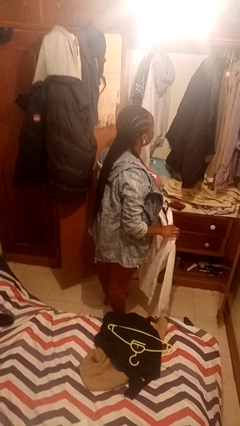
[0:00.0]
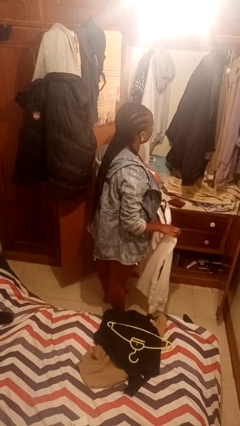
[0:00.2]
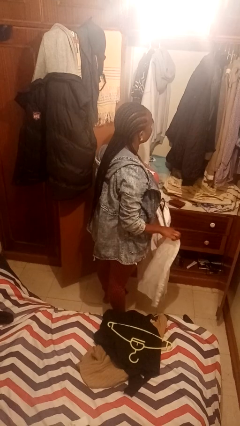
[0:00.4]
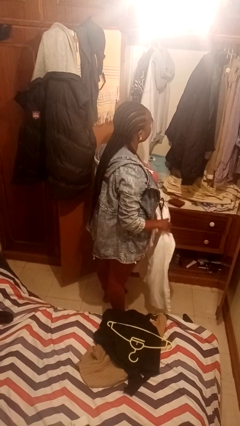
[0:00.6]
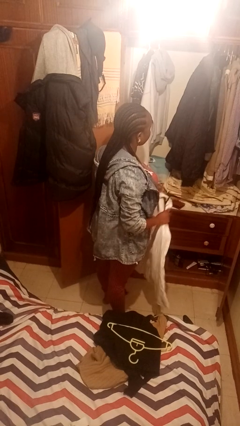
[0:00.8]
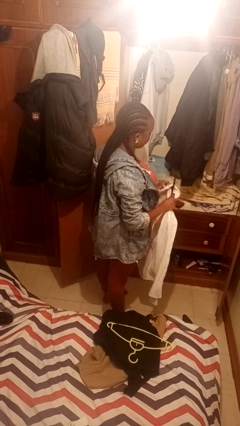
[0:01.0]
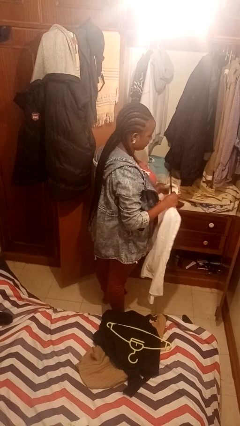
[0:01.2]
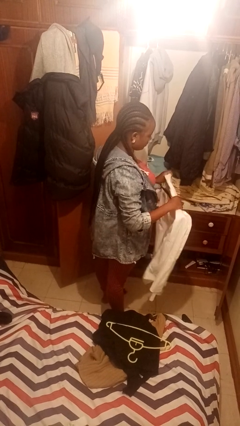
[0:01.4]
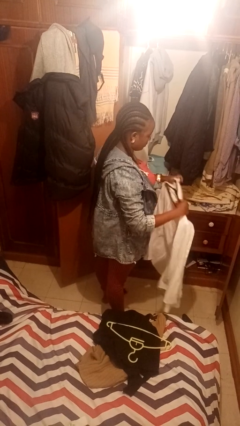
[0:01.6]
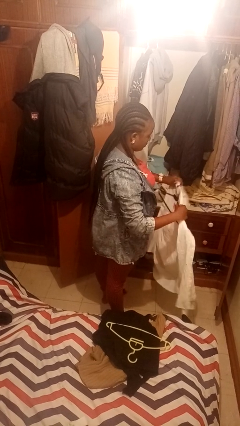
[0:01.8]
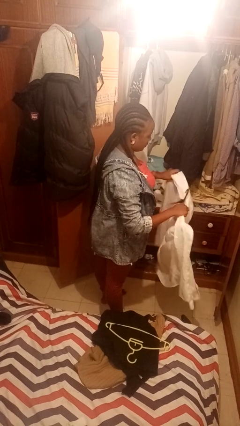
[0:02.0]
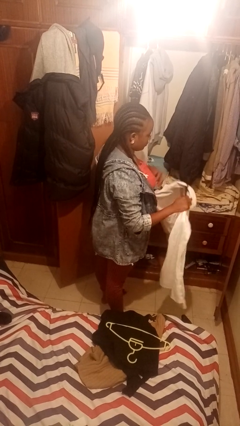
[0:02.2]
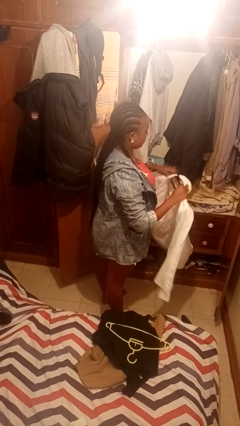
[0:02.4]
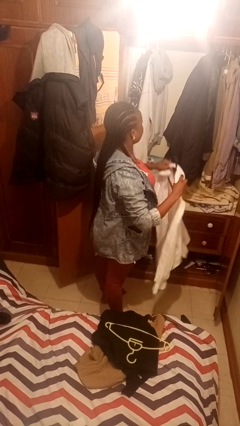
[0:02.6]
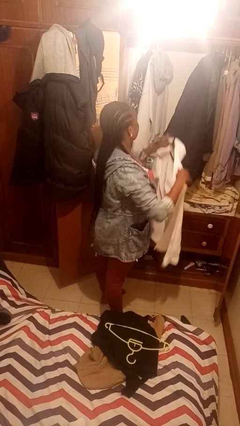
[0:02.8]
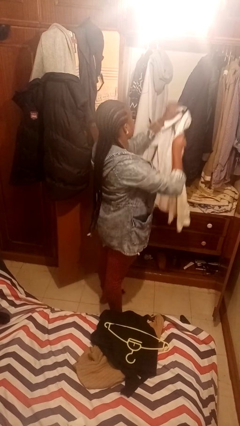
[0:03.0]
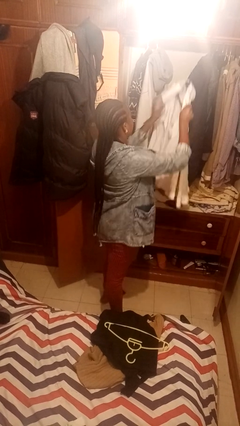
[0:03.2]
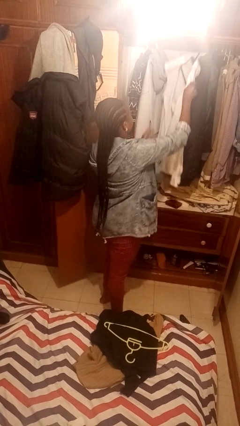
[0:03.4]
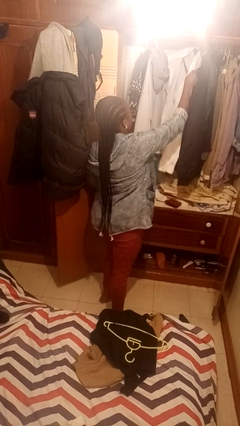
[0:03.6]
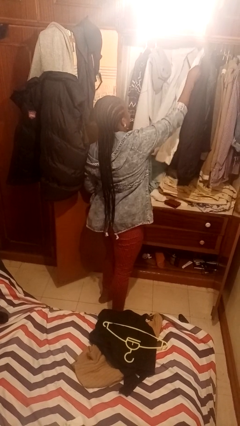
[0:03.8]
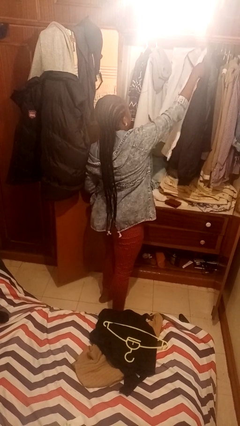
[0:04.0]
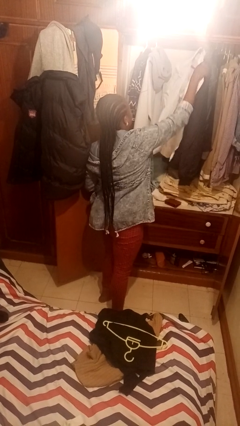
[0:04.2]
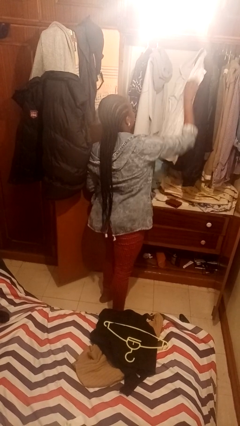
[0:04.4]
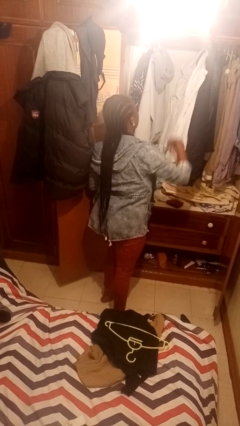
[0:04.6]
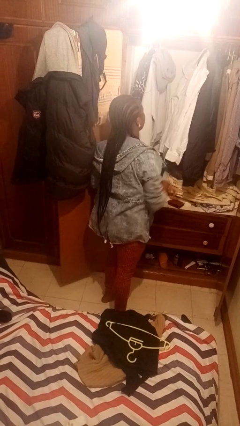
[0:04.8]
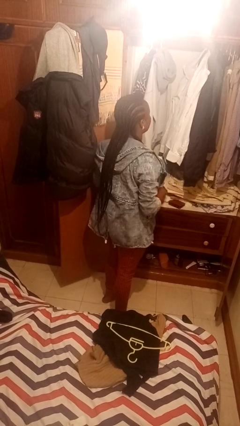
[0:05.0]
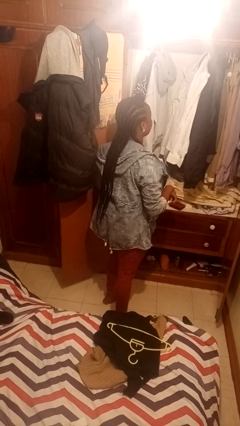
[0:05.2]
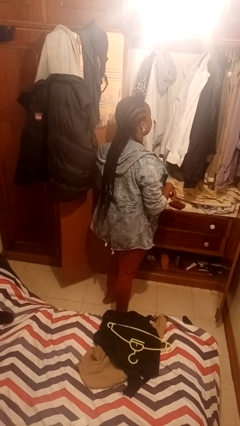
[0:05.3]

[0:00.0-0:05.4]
person puts clothes into closet

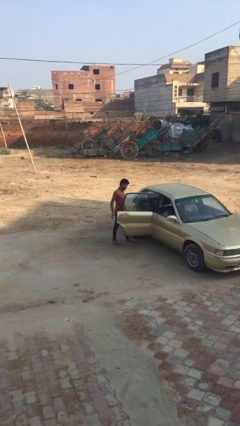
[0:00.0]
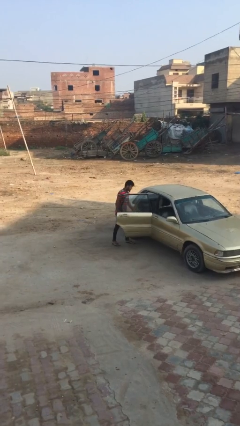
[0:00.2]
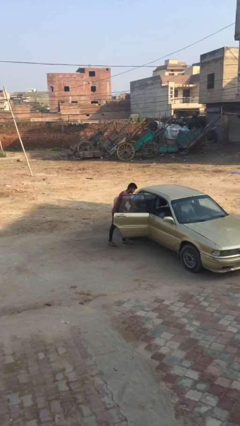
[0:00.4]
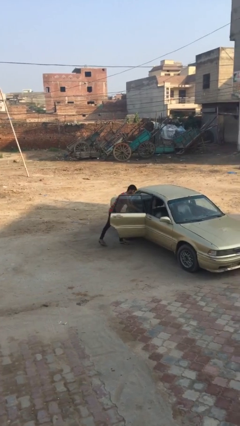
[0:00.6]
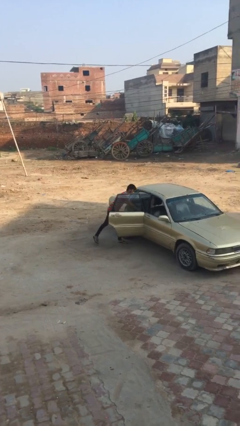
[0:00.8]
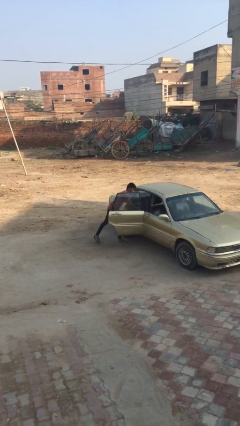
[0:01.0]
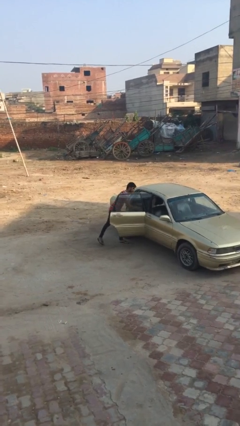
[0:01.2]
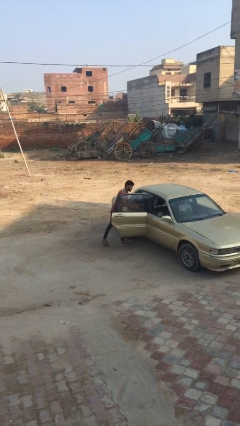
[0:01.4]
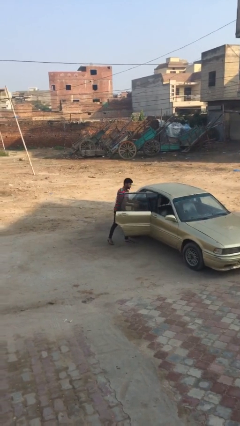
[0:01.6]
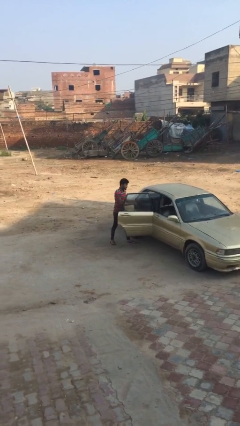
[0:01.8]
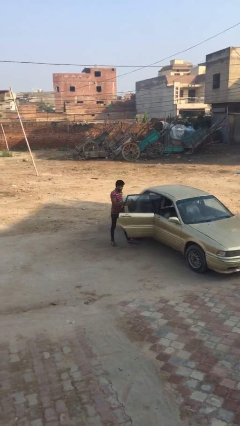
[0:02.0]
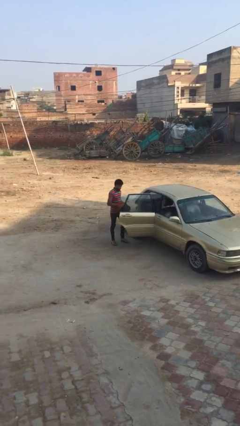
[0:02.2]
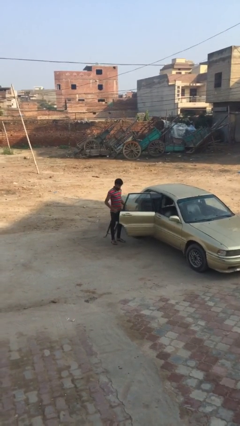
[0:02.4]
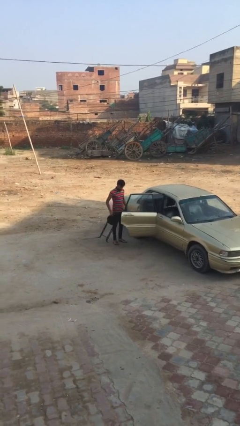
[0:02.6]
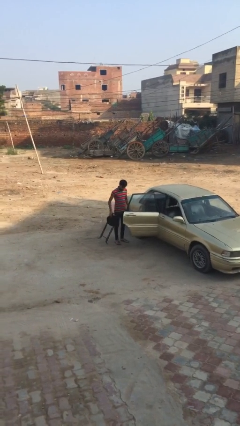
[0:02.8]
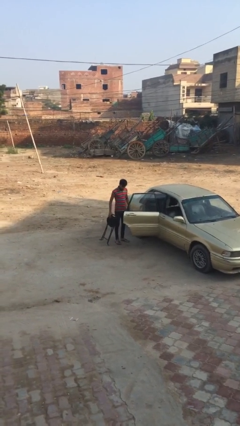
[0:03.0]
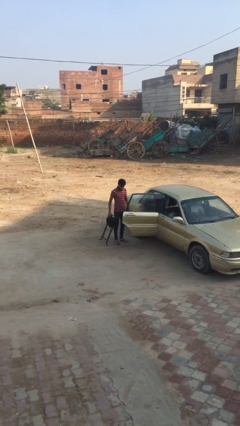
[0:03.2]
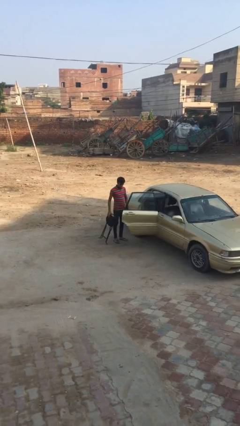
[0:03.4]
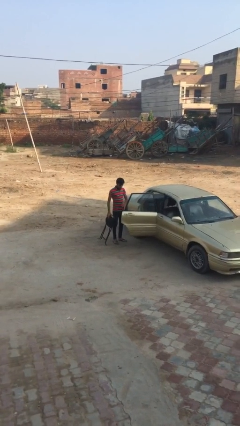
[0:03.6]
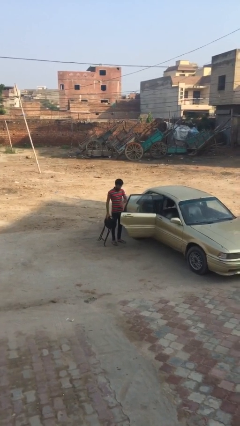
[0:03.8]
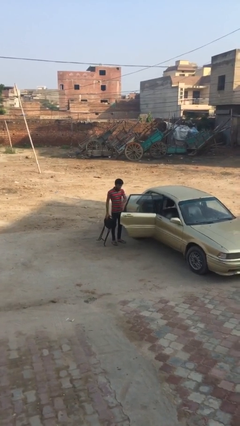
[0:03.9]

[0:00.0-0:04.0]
person unloads car

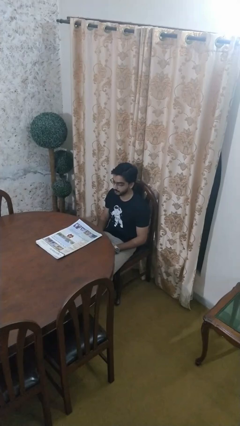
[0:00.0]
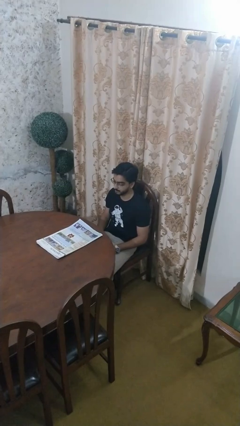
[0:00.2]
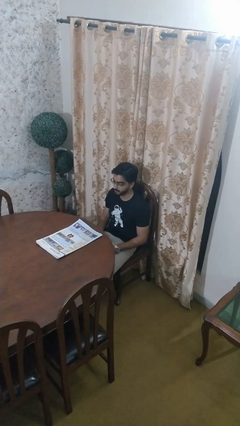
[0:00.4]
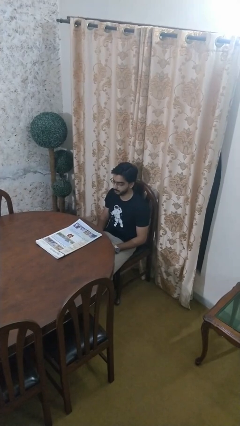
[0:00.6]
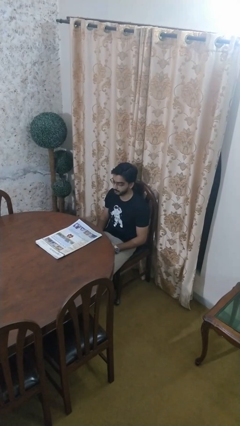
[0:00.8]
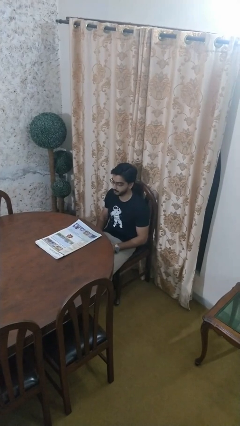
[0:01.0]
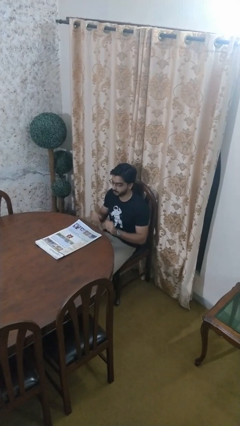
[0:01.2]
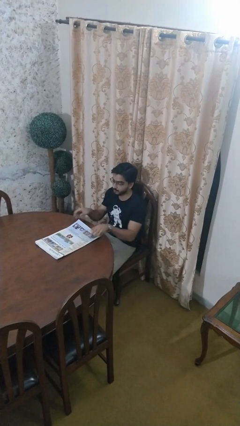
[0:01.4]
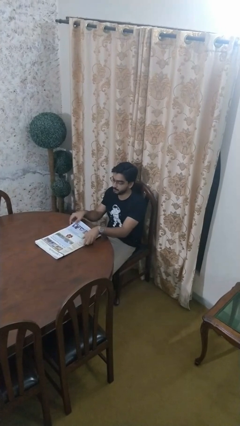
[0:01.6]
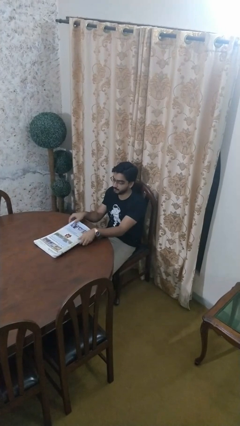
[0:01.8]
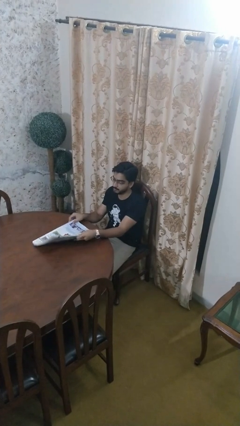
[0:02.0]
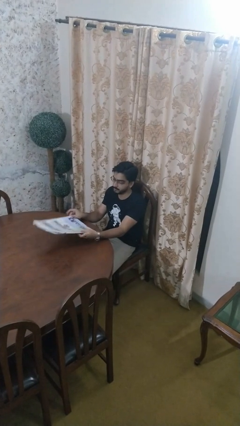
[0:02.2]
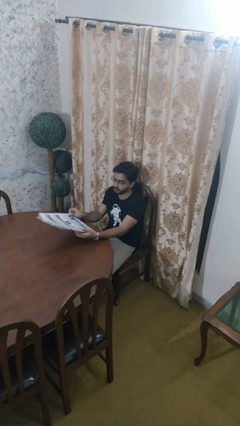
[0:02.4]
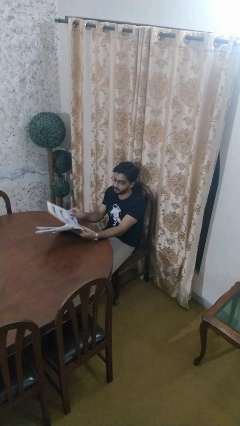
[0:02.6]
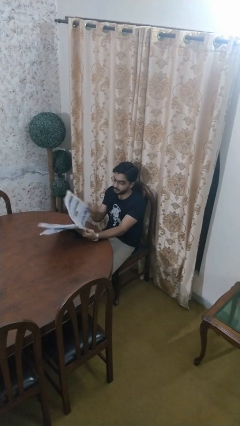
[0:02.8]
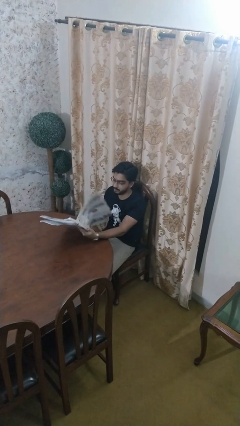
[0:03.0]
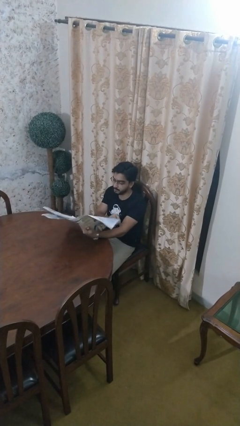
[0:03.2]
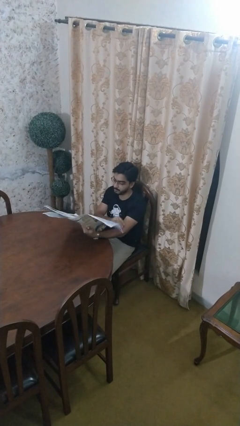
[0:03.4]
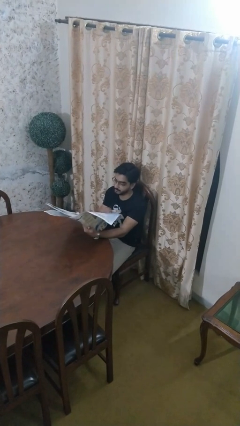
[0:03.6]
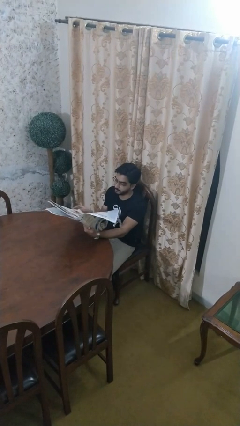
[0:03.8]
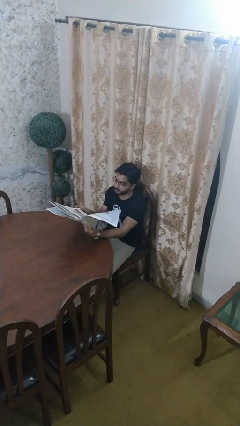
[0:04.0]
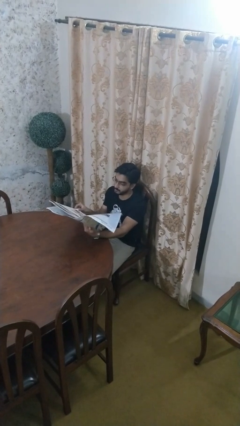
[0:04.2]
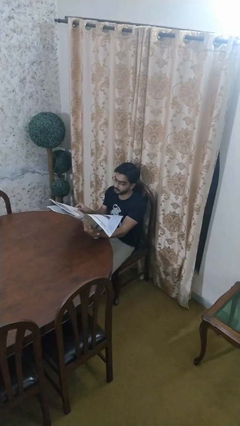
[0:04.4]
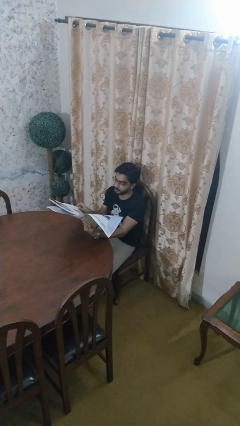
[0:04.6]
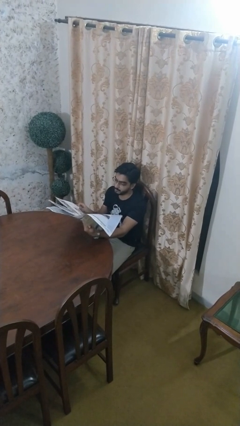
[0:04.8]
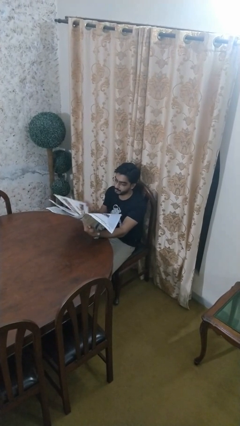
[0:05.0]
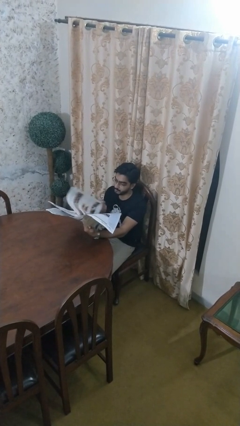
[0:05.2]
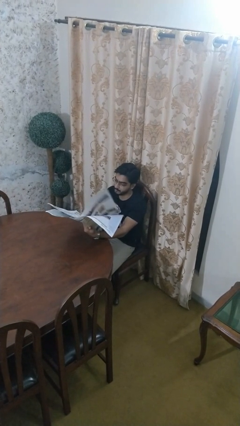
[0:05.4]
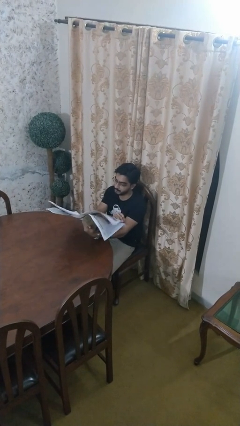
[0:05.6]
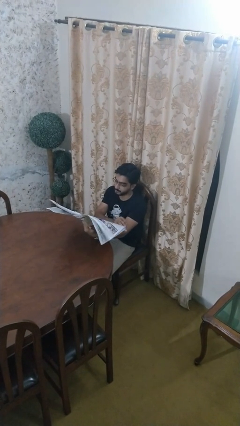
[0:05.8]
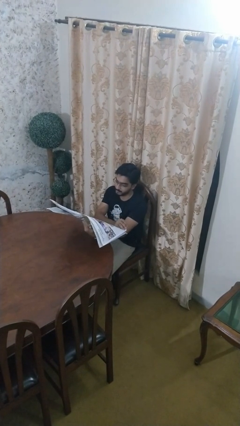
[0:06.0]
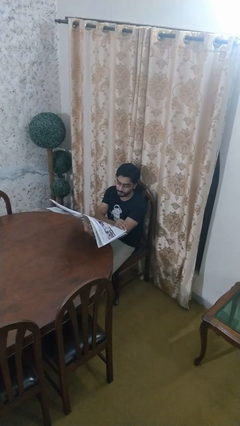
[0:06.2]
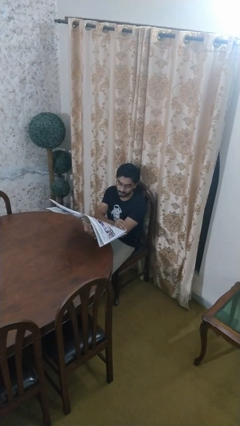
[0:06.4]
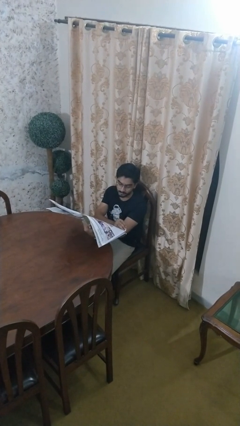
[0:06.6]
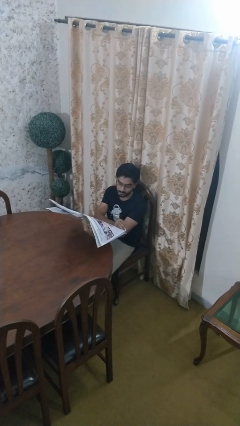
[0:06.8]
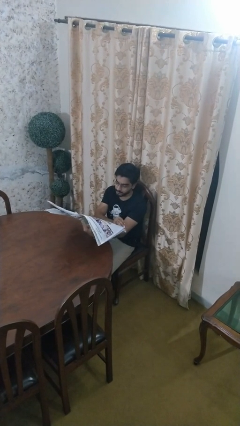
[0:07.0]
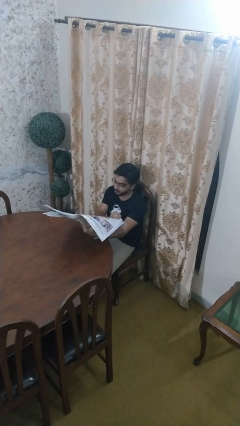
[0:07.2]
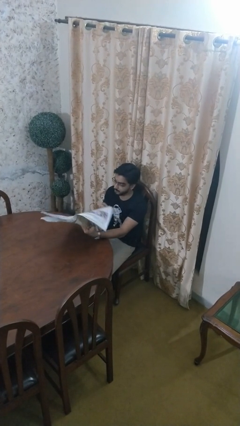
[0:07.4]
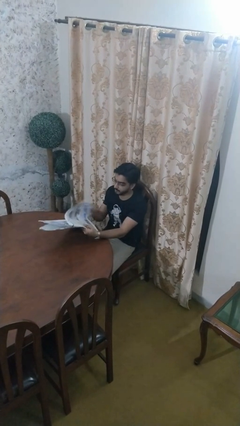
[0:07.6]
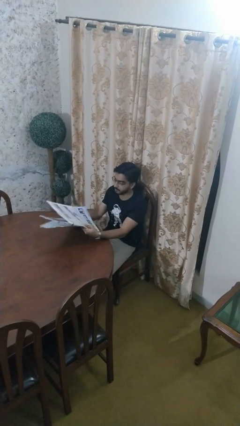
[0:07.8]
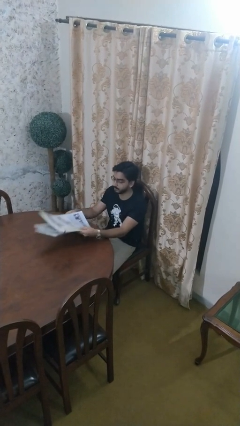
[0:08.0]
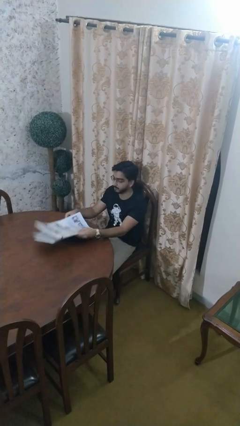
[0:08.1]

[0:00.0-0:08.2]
person reads magazine

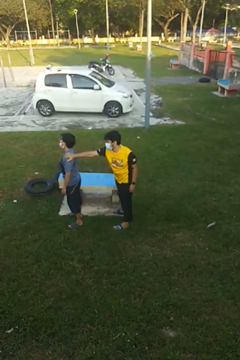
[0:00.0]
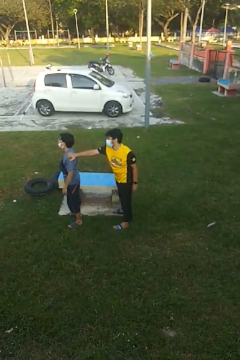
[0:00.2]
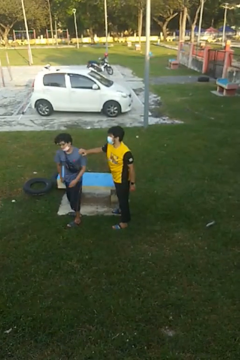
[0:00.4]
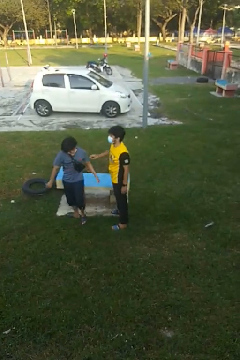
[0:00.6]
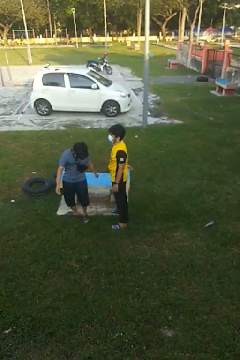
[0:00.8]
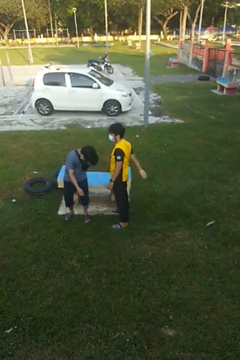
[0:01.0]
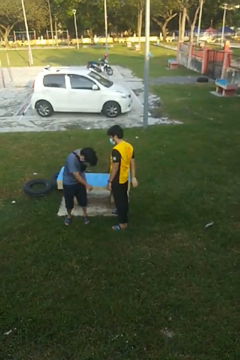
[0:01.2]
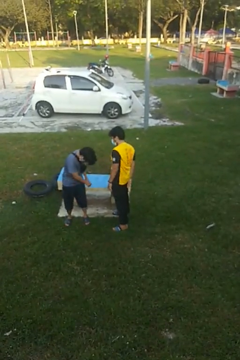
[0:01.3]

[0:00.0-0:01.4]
person spins person around
